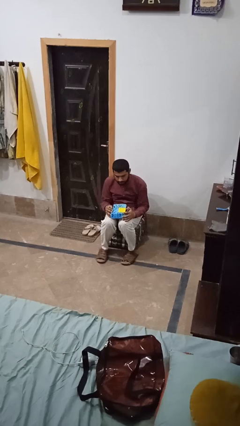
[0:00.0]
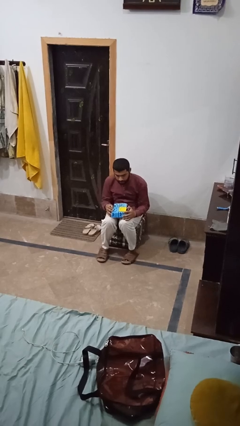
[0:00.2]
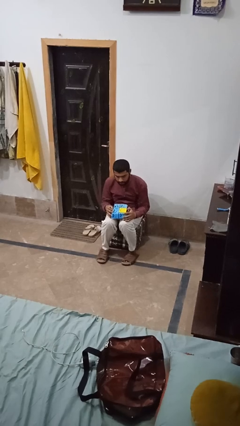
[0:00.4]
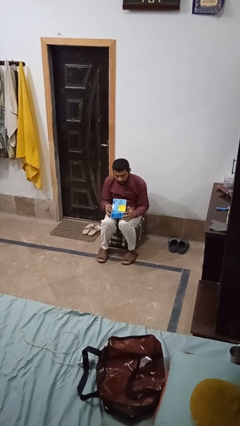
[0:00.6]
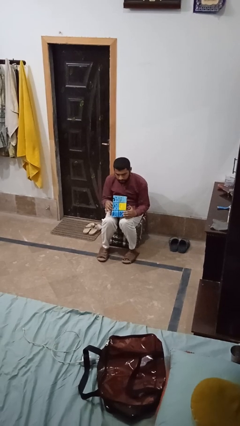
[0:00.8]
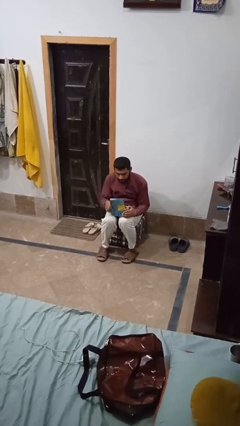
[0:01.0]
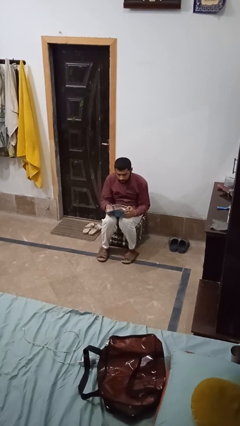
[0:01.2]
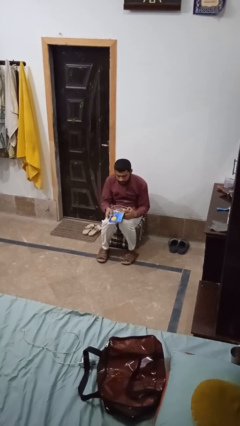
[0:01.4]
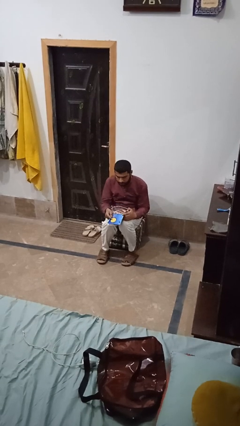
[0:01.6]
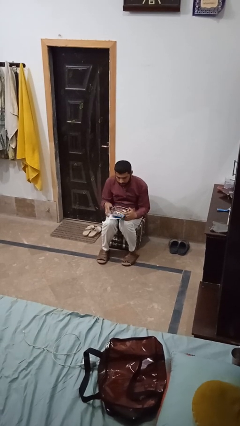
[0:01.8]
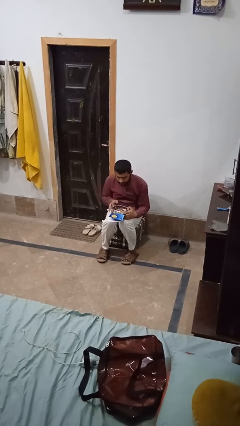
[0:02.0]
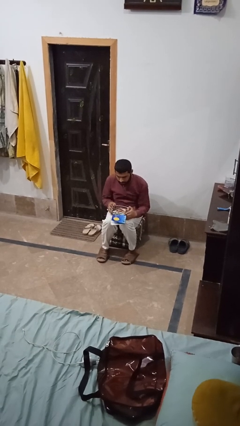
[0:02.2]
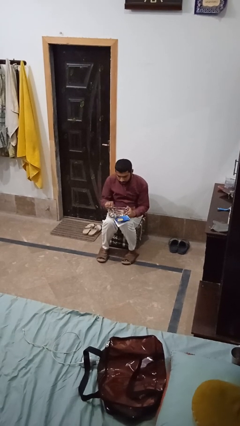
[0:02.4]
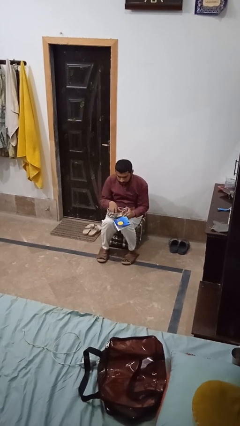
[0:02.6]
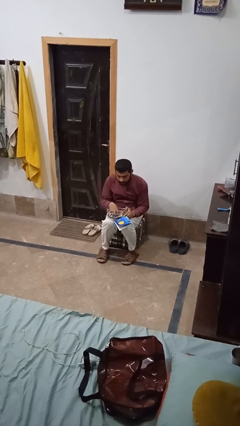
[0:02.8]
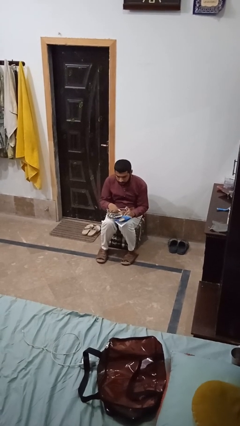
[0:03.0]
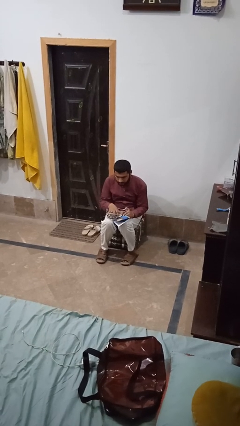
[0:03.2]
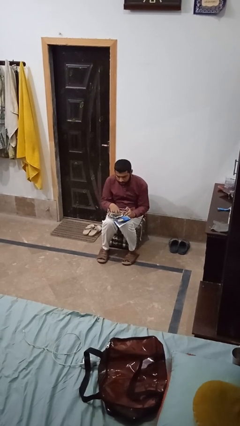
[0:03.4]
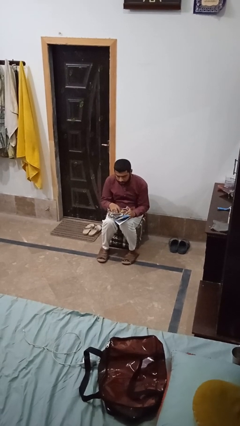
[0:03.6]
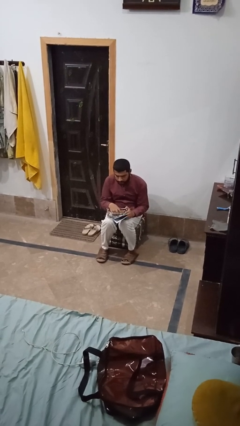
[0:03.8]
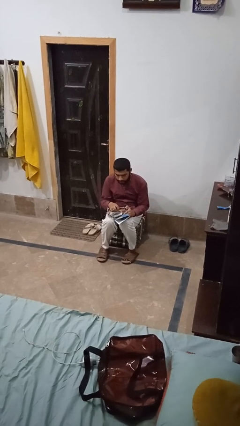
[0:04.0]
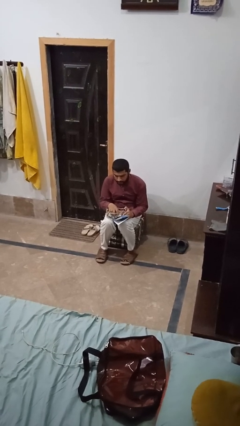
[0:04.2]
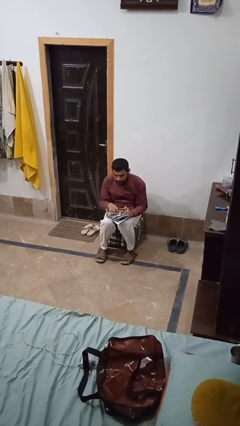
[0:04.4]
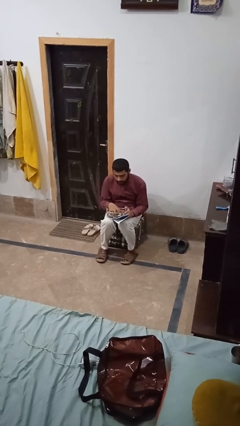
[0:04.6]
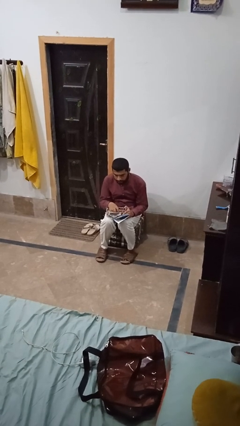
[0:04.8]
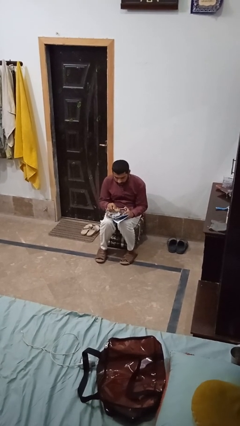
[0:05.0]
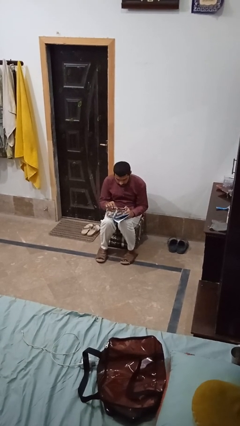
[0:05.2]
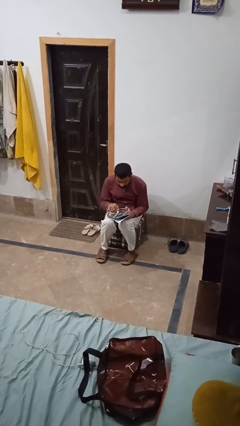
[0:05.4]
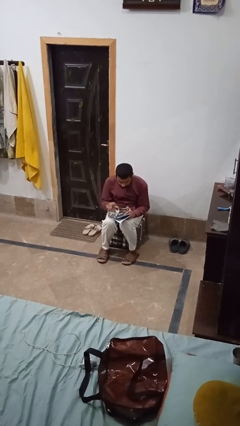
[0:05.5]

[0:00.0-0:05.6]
person opens jewelry box

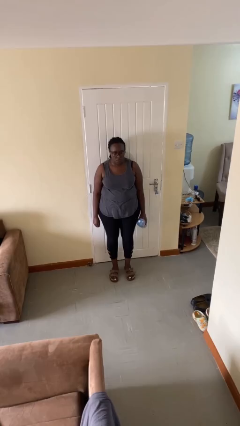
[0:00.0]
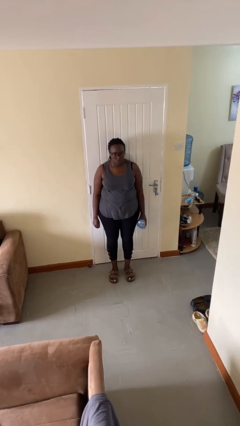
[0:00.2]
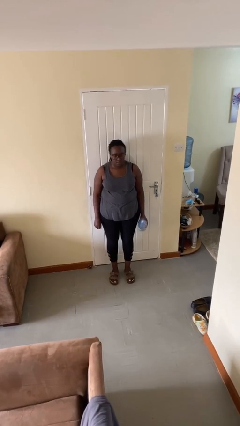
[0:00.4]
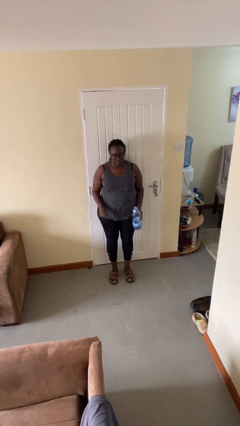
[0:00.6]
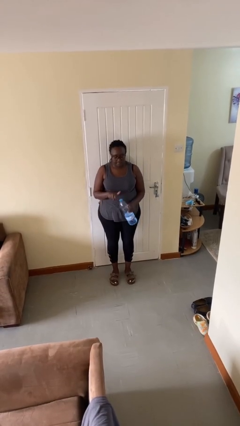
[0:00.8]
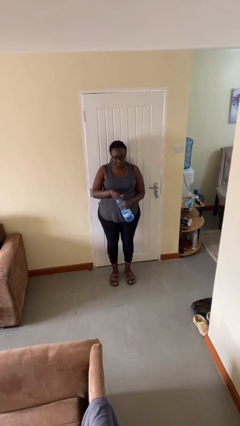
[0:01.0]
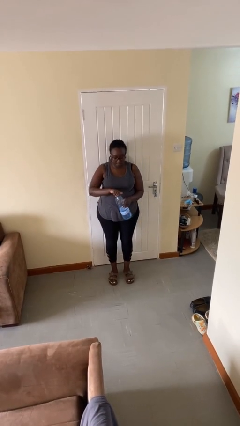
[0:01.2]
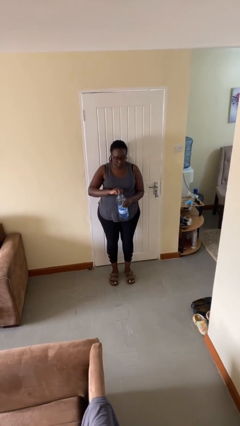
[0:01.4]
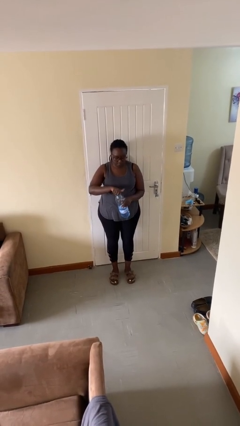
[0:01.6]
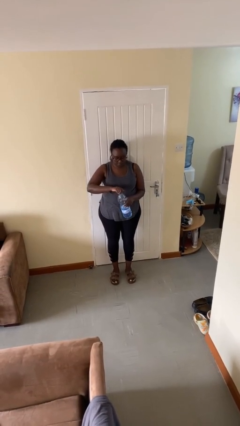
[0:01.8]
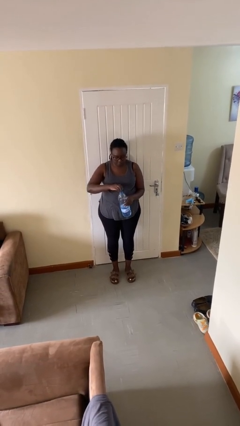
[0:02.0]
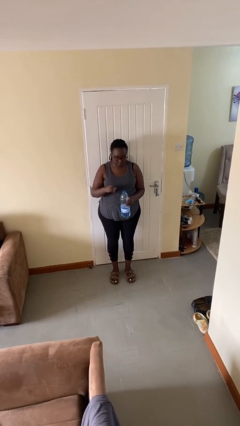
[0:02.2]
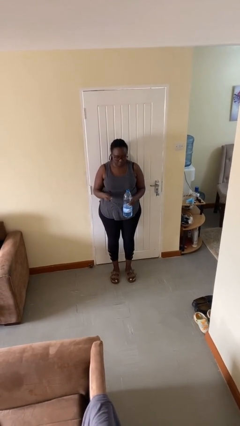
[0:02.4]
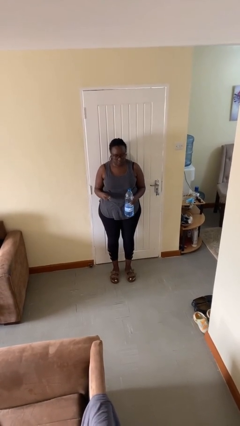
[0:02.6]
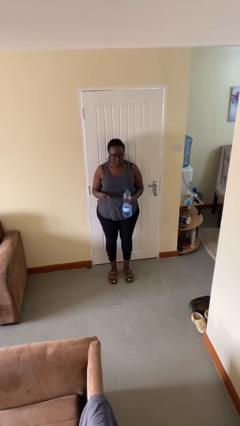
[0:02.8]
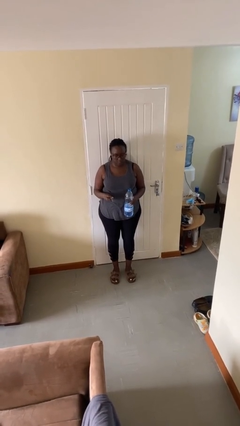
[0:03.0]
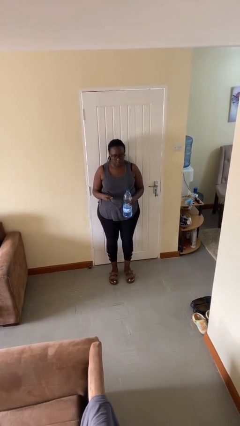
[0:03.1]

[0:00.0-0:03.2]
person unscrews lid from bottle

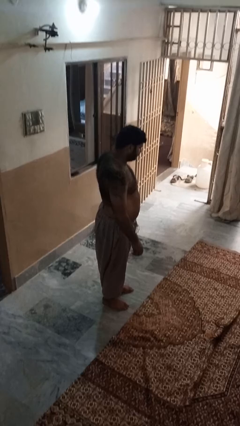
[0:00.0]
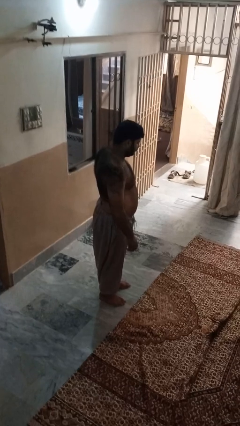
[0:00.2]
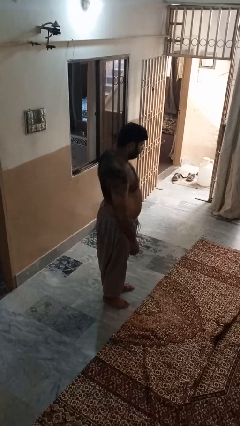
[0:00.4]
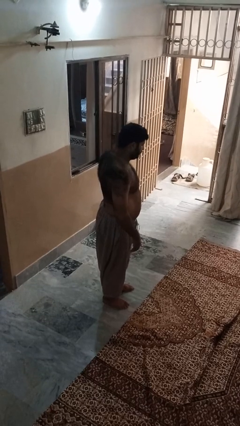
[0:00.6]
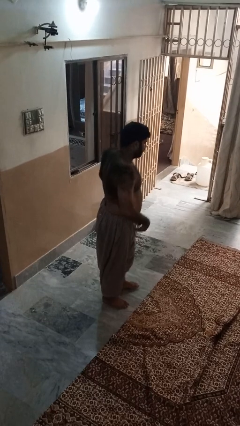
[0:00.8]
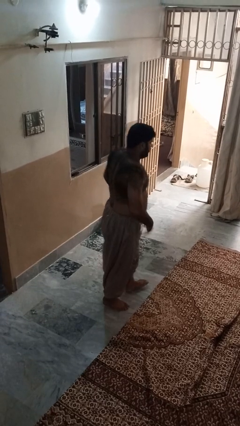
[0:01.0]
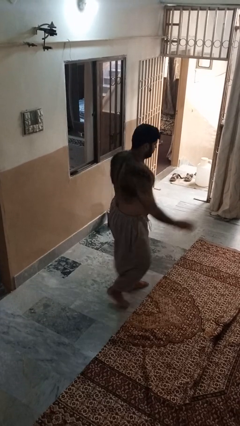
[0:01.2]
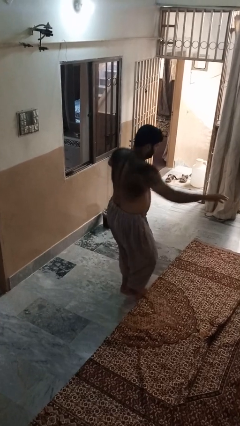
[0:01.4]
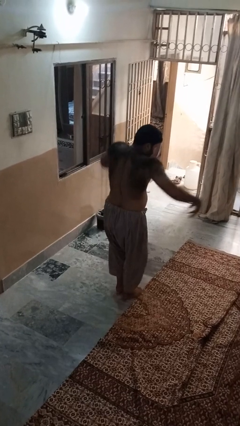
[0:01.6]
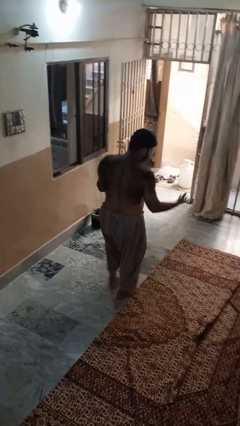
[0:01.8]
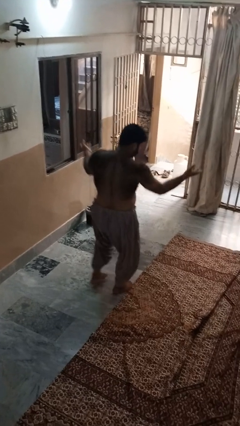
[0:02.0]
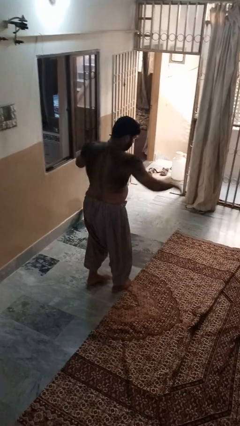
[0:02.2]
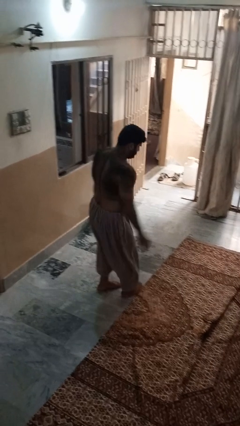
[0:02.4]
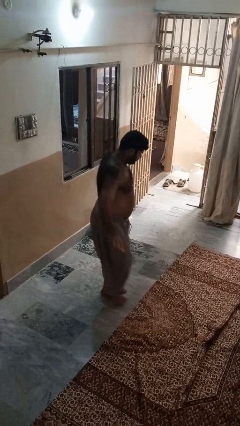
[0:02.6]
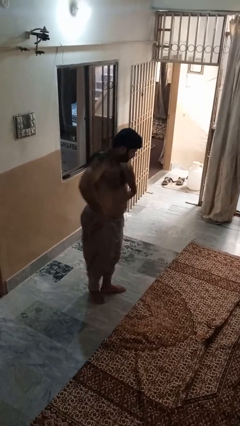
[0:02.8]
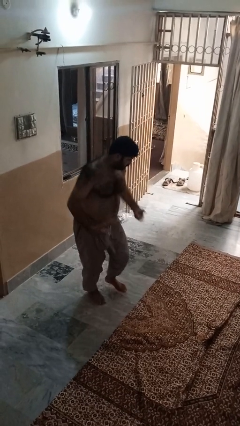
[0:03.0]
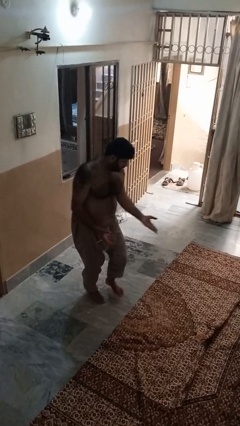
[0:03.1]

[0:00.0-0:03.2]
person dances in place

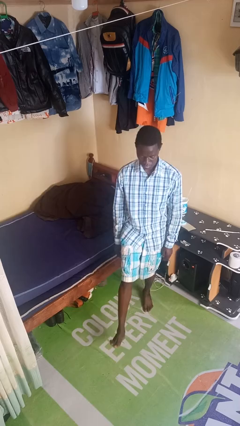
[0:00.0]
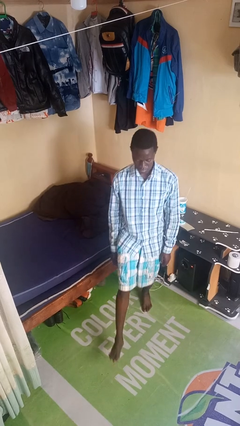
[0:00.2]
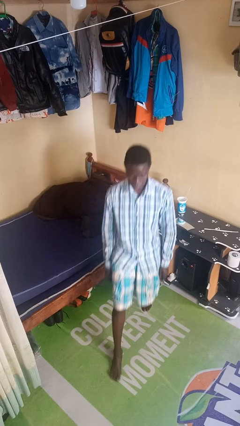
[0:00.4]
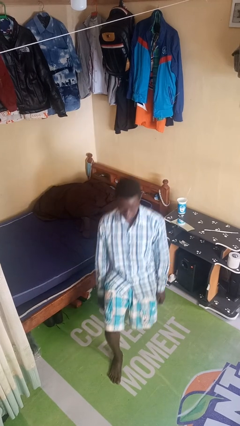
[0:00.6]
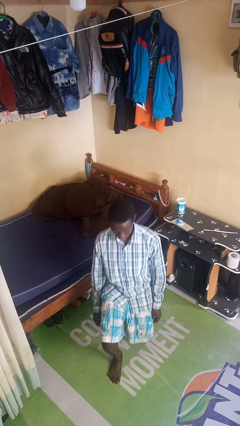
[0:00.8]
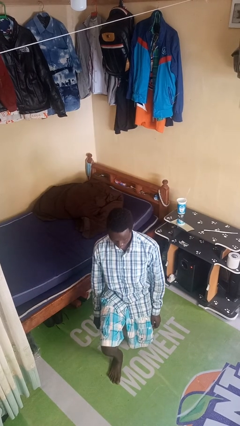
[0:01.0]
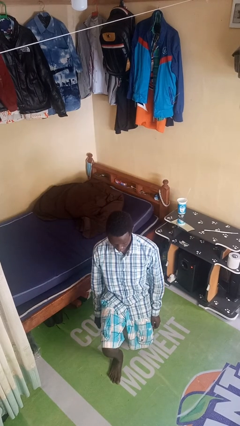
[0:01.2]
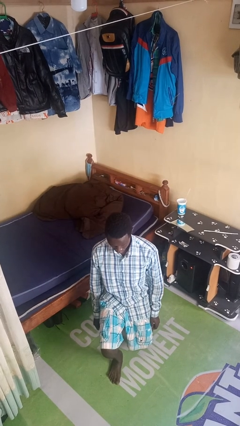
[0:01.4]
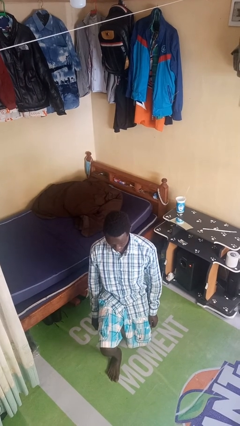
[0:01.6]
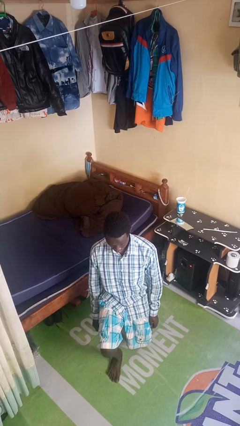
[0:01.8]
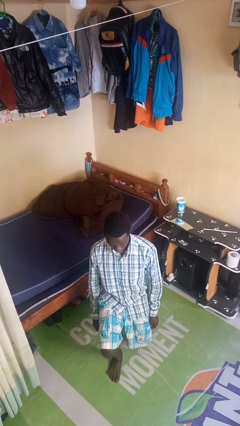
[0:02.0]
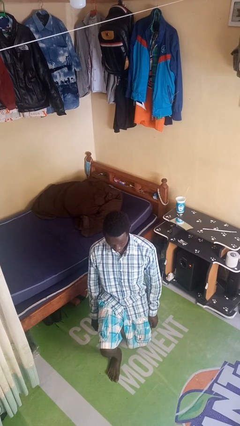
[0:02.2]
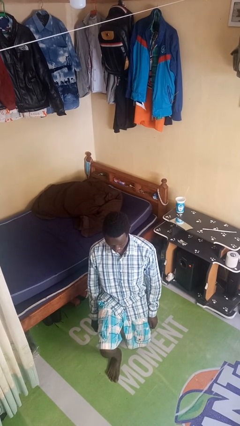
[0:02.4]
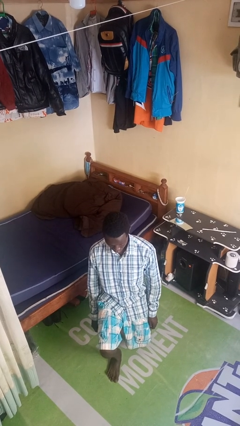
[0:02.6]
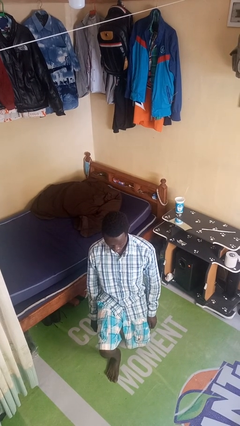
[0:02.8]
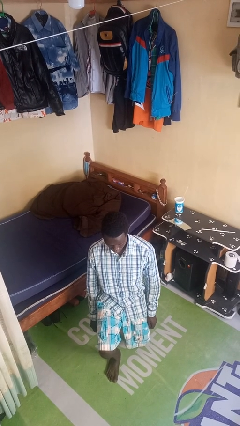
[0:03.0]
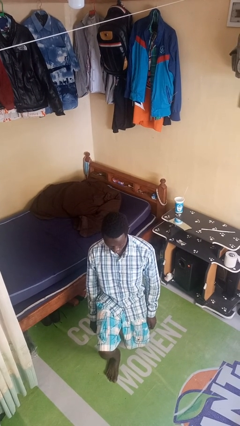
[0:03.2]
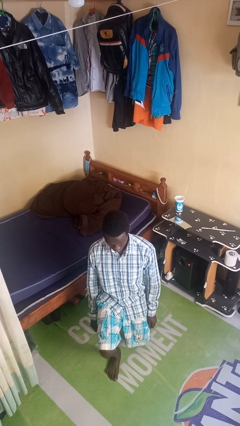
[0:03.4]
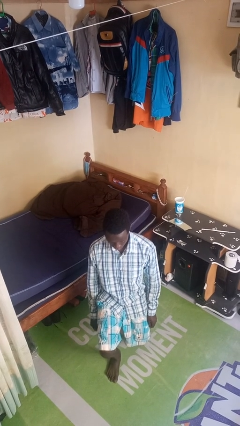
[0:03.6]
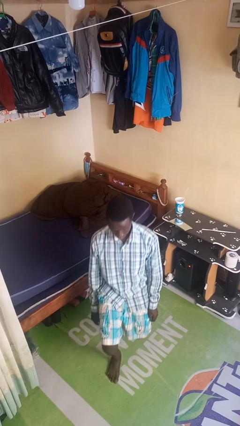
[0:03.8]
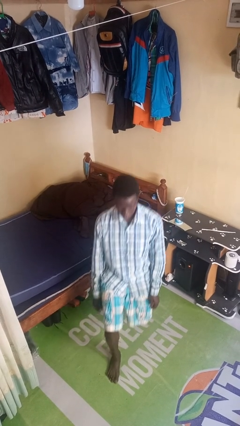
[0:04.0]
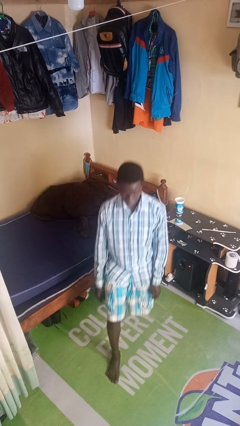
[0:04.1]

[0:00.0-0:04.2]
person exercises with lunges

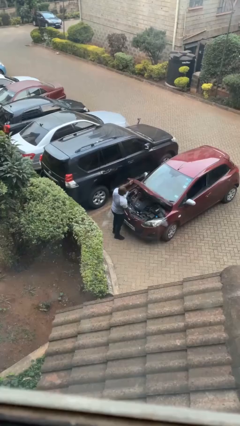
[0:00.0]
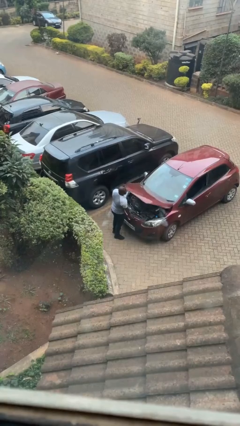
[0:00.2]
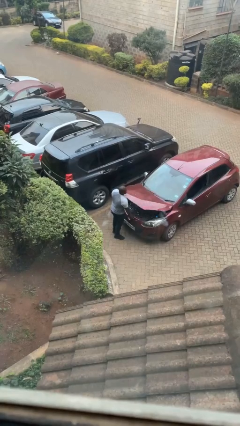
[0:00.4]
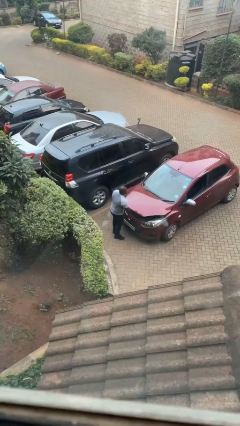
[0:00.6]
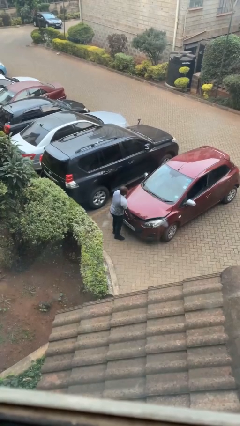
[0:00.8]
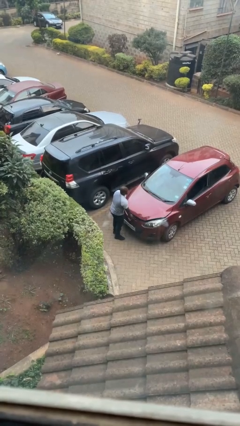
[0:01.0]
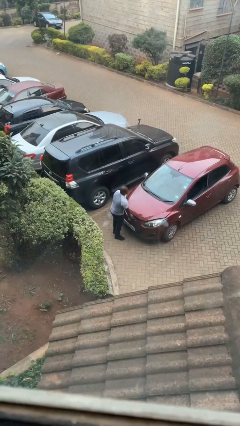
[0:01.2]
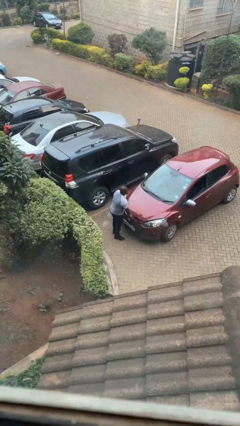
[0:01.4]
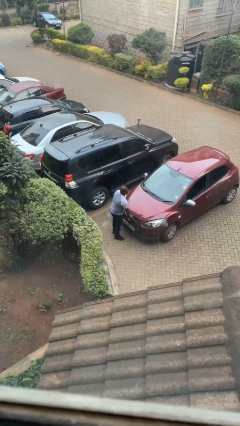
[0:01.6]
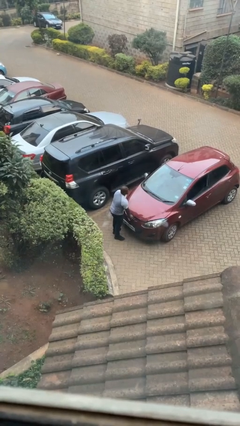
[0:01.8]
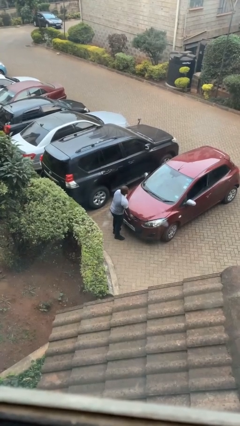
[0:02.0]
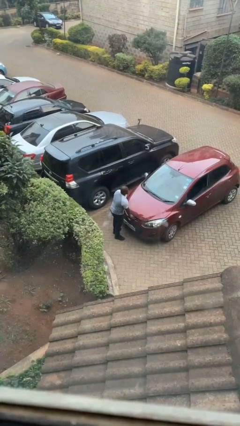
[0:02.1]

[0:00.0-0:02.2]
person closes car hood
